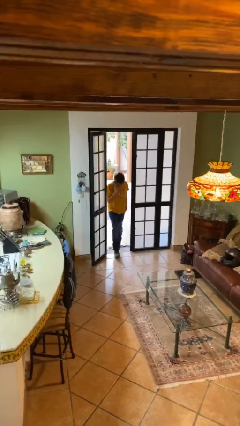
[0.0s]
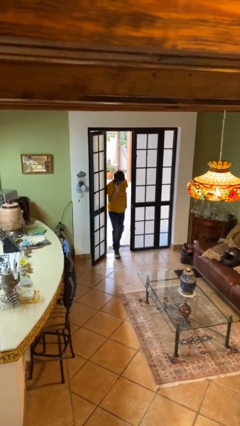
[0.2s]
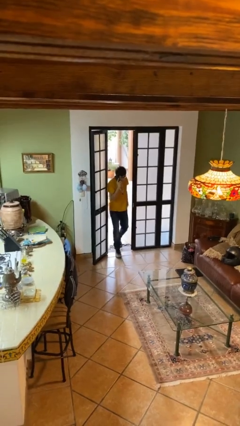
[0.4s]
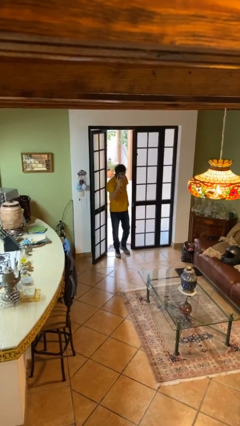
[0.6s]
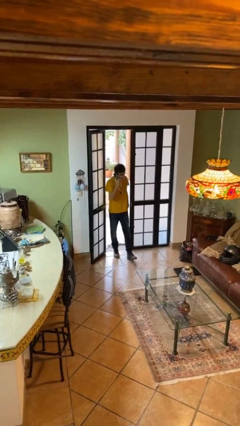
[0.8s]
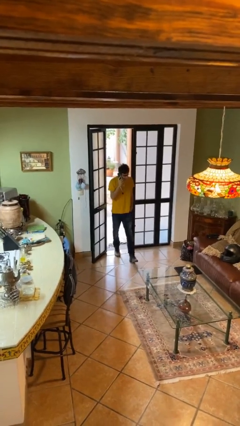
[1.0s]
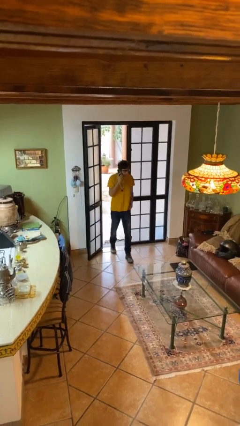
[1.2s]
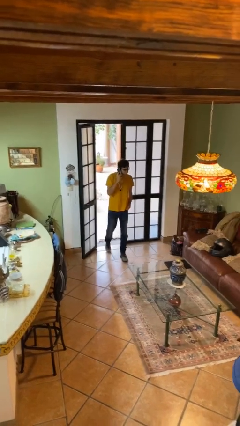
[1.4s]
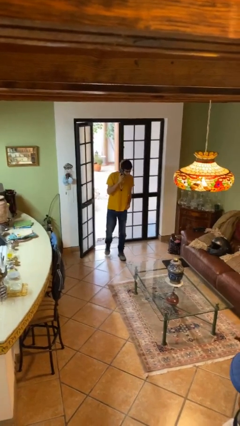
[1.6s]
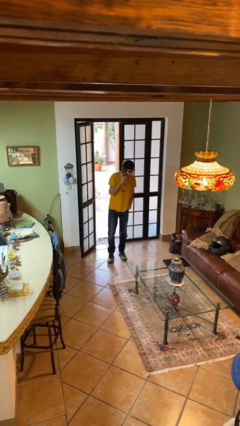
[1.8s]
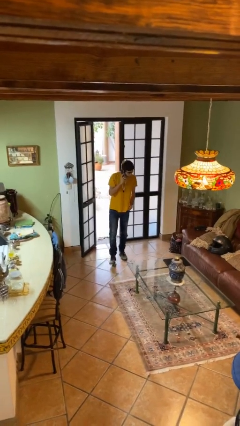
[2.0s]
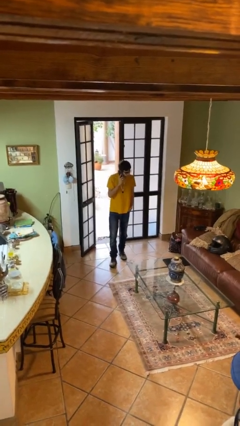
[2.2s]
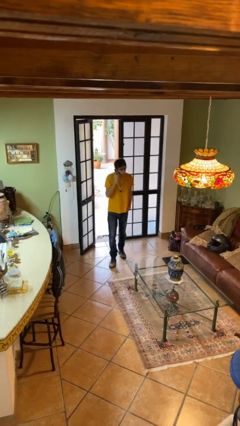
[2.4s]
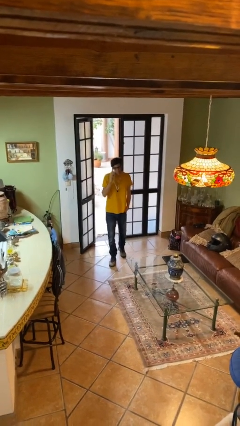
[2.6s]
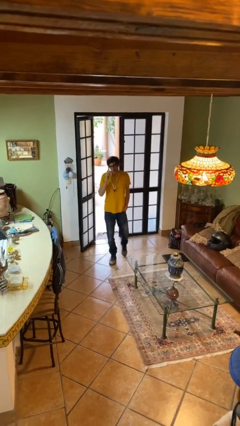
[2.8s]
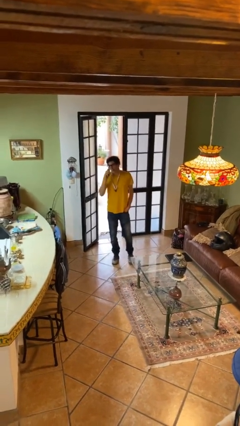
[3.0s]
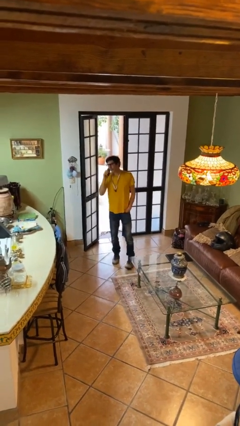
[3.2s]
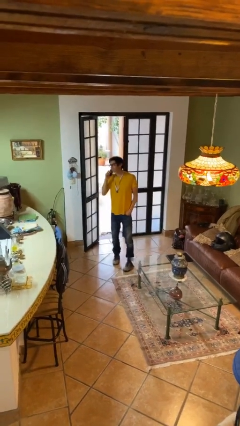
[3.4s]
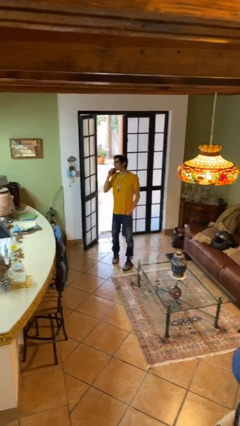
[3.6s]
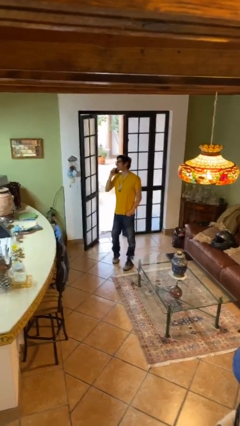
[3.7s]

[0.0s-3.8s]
person enters scene through structure

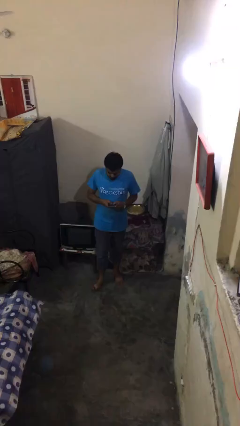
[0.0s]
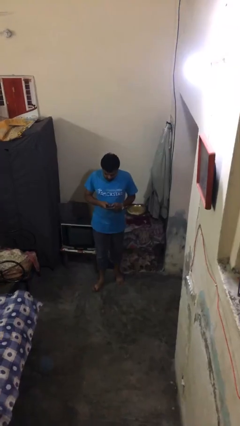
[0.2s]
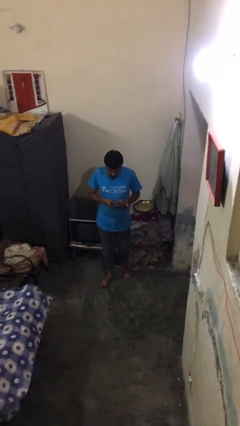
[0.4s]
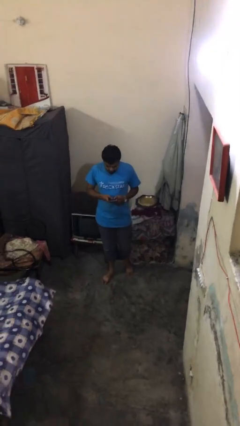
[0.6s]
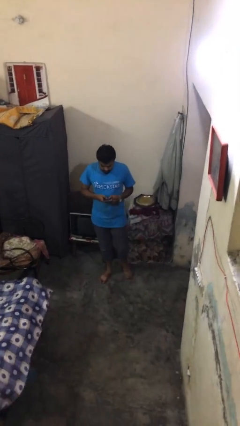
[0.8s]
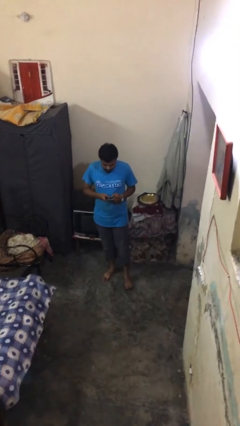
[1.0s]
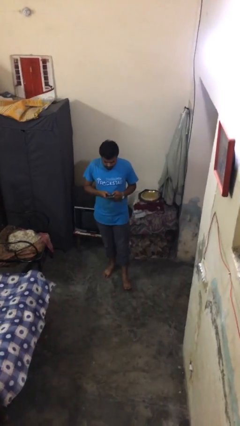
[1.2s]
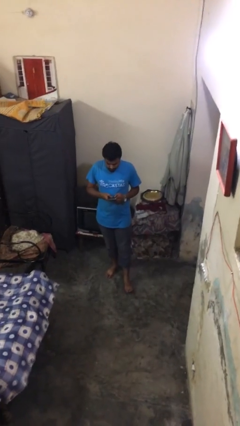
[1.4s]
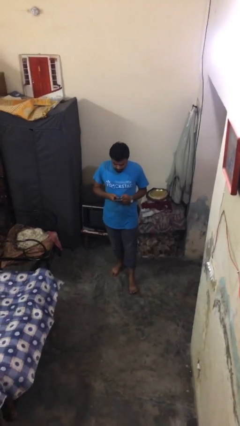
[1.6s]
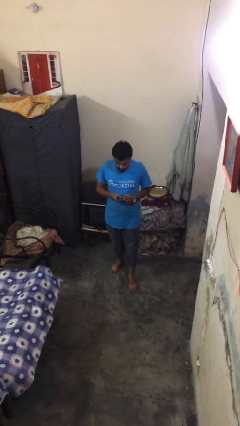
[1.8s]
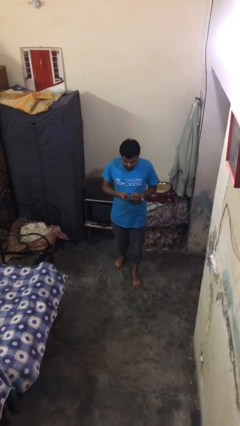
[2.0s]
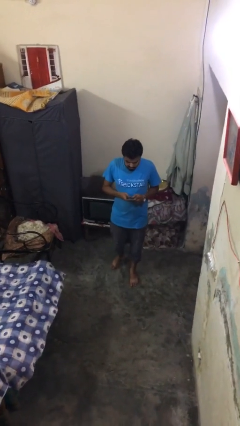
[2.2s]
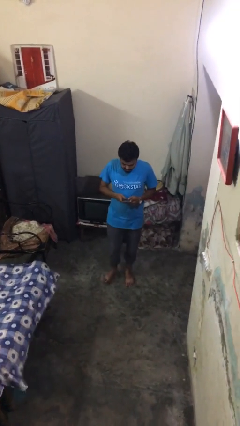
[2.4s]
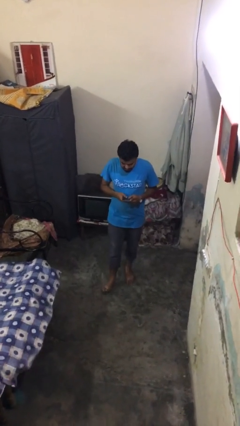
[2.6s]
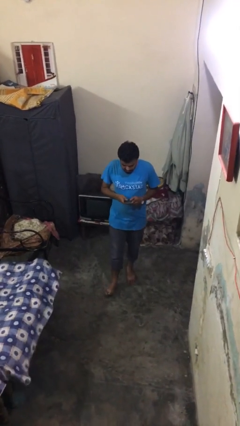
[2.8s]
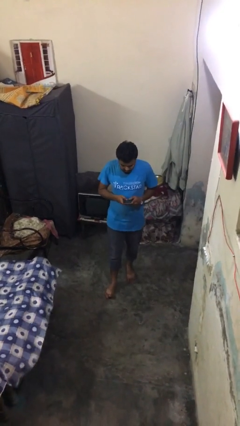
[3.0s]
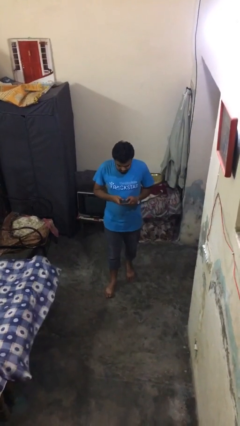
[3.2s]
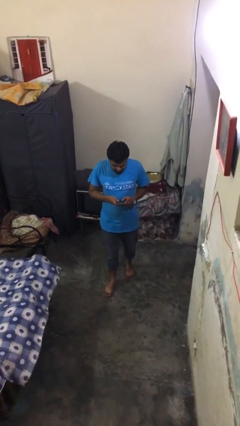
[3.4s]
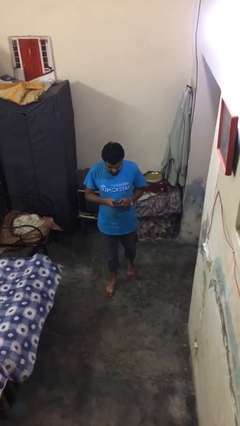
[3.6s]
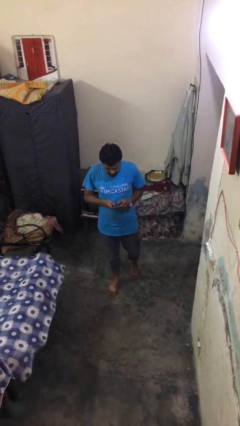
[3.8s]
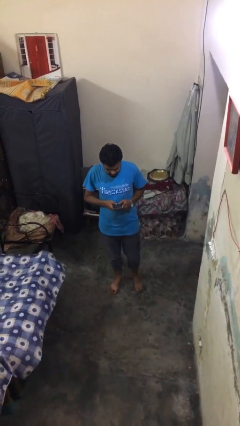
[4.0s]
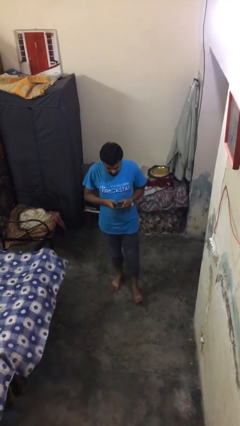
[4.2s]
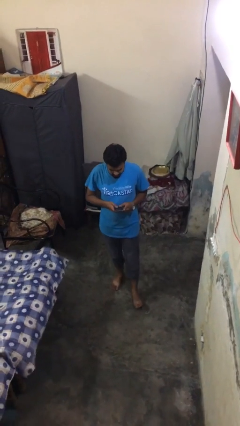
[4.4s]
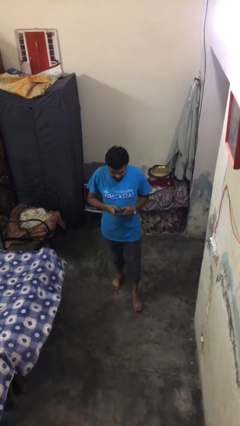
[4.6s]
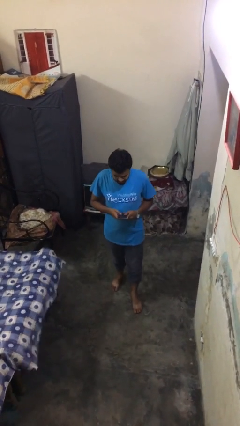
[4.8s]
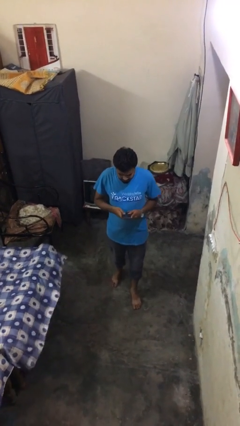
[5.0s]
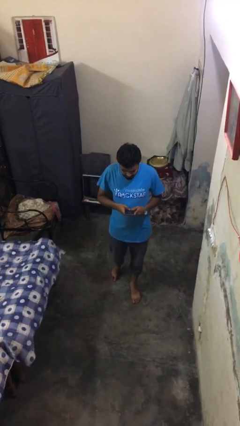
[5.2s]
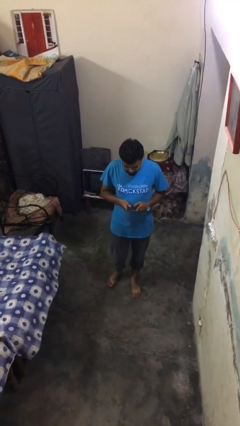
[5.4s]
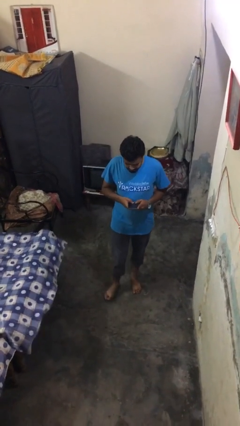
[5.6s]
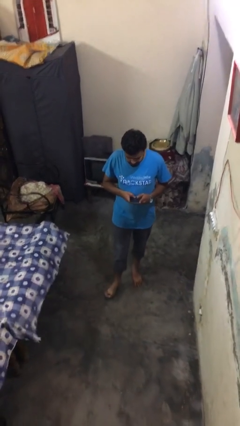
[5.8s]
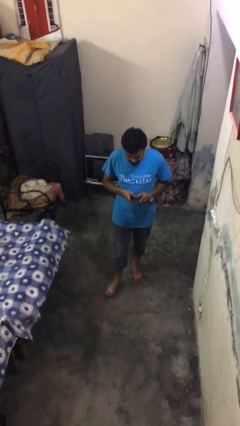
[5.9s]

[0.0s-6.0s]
person texts on phone

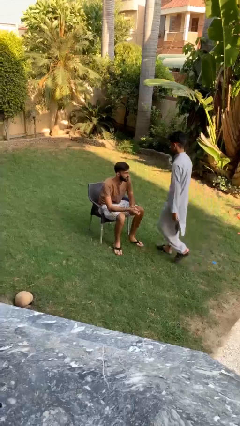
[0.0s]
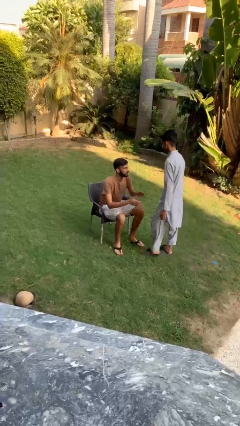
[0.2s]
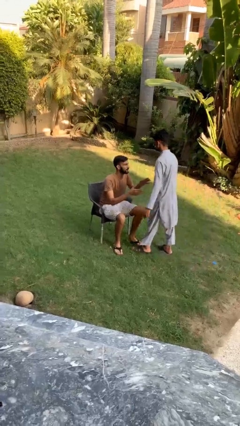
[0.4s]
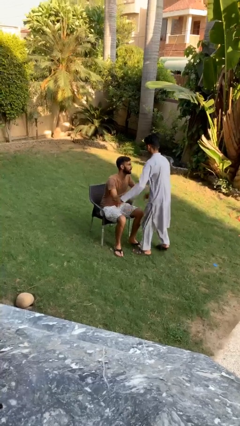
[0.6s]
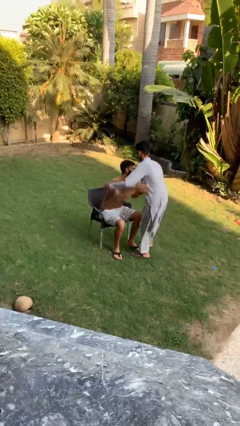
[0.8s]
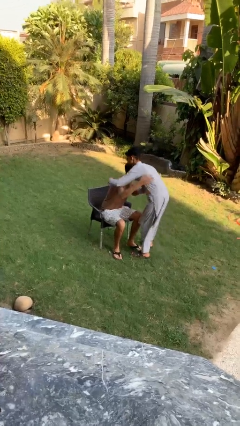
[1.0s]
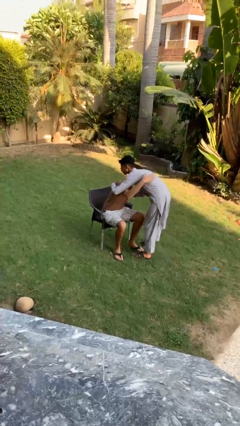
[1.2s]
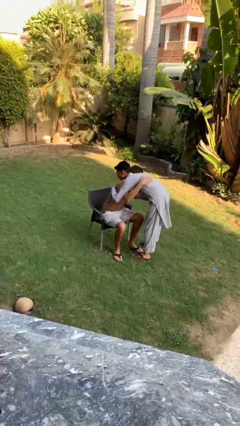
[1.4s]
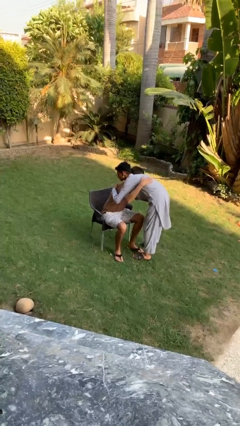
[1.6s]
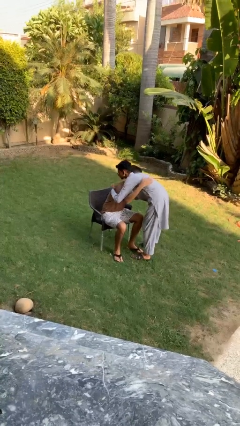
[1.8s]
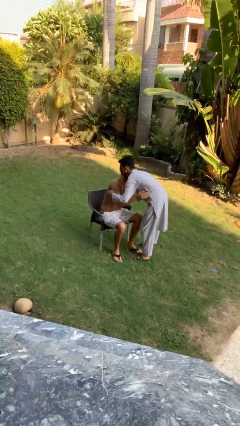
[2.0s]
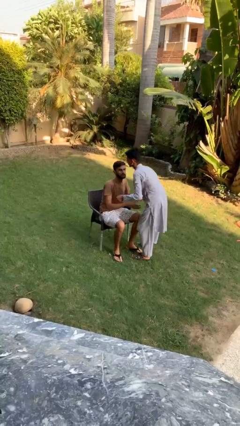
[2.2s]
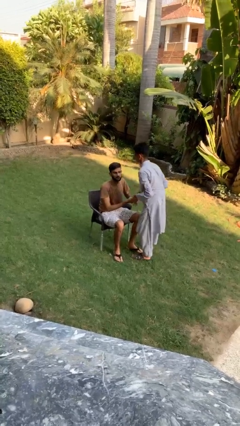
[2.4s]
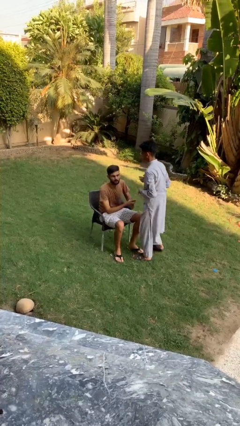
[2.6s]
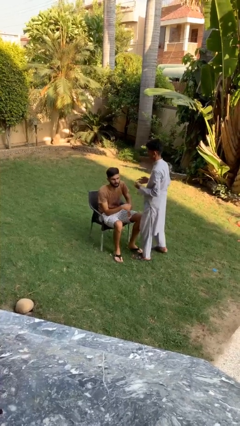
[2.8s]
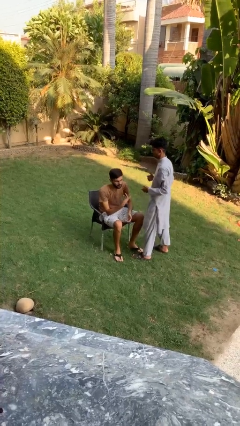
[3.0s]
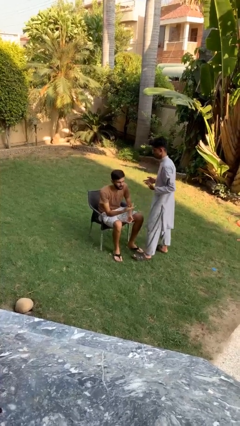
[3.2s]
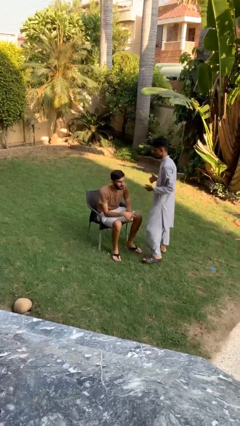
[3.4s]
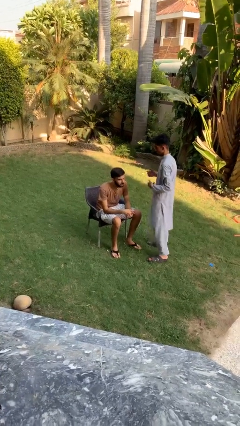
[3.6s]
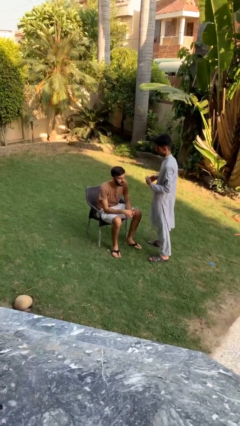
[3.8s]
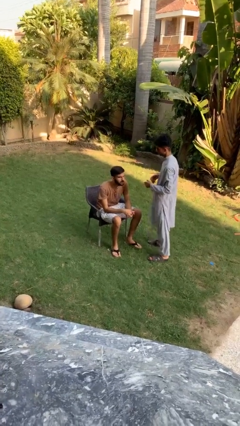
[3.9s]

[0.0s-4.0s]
person embraces person

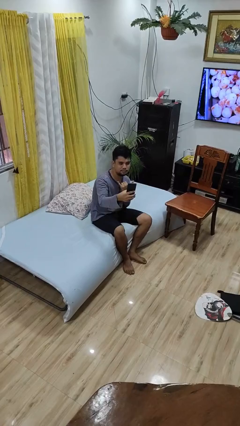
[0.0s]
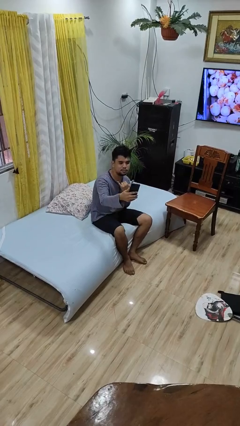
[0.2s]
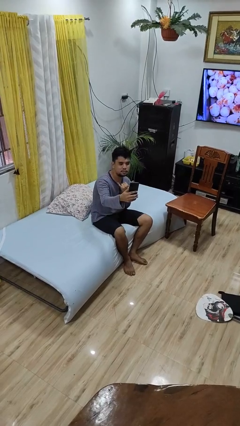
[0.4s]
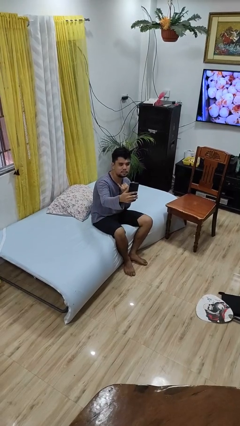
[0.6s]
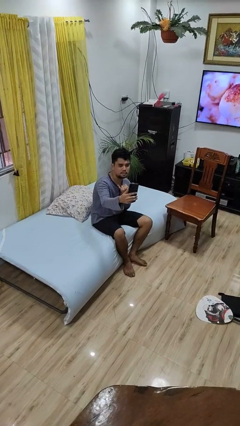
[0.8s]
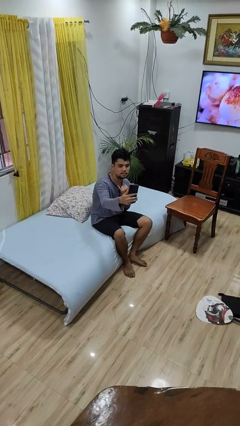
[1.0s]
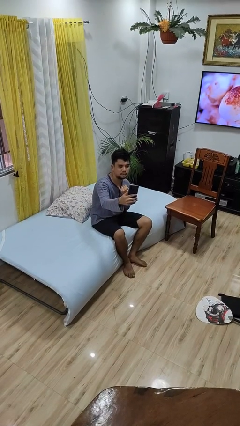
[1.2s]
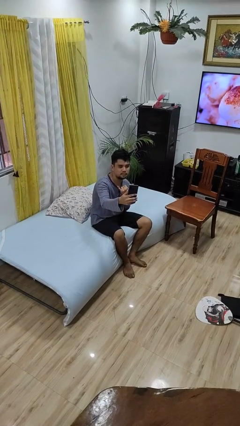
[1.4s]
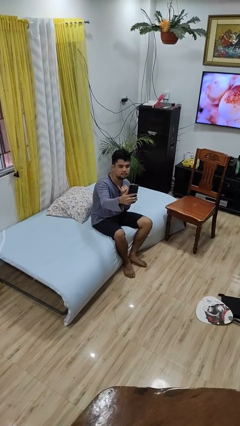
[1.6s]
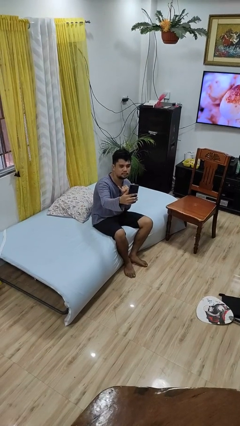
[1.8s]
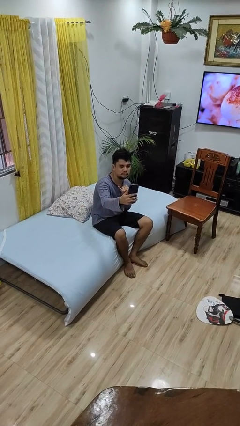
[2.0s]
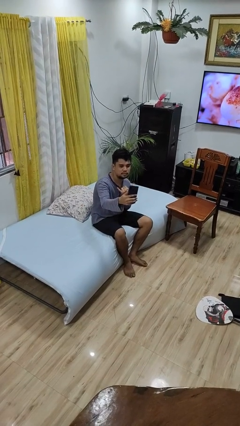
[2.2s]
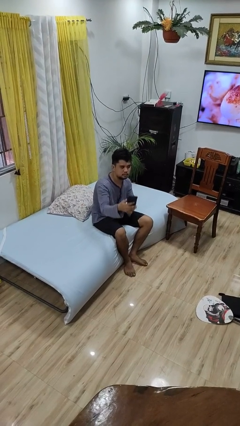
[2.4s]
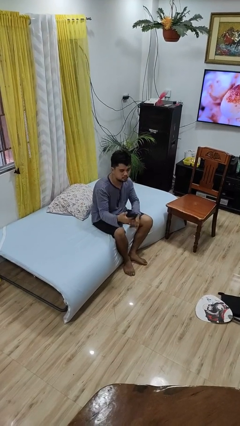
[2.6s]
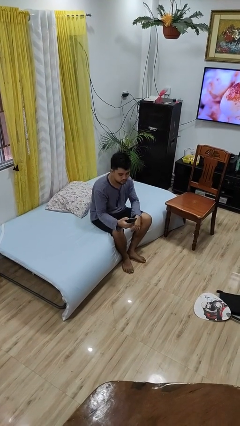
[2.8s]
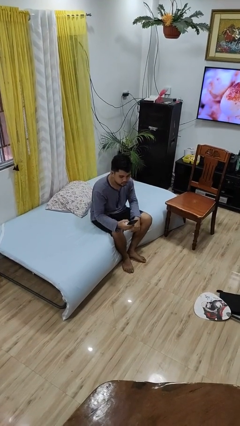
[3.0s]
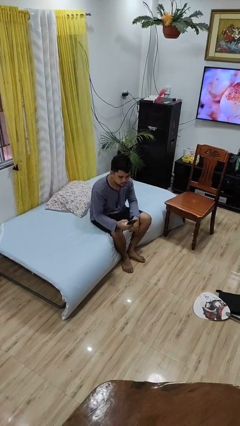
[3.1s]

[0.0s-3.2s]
person takes selfie

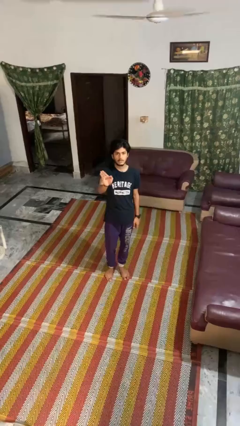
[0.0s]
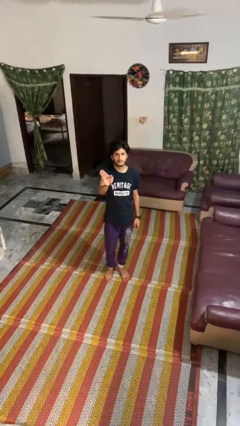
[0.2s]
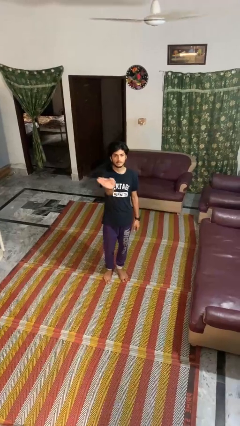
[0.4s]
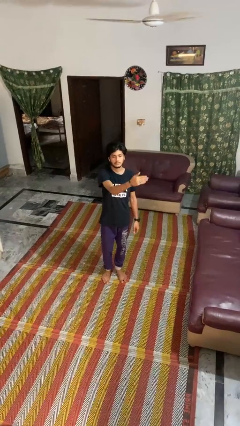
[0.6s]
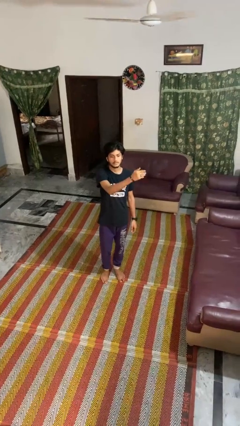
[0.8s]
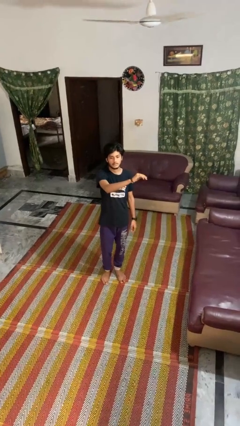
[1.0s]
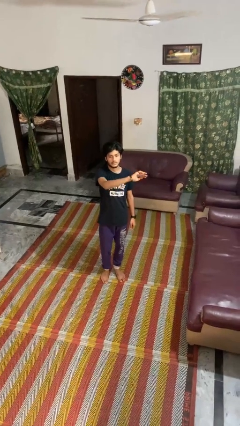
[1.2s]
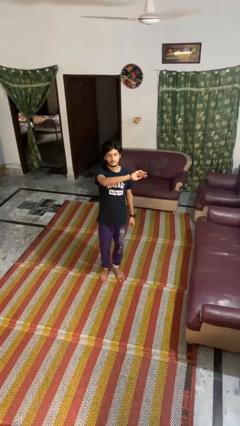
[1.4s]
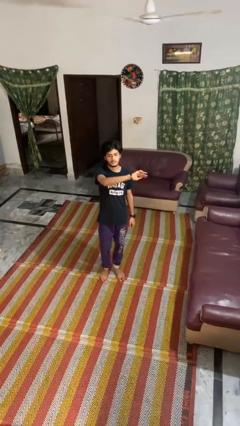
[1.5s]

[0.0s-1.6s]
person gestures swipe left
